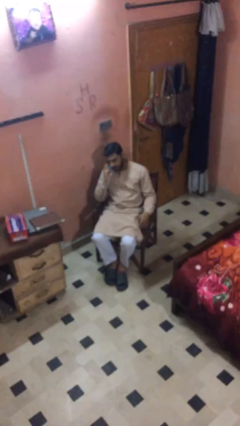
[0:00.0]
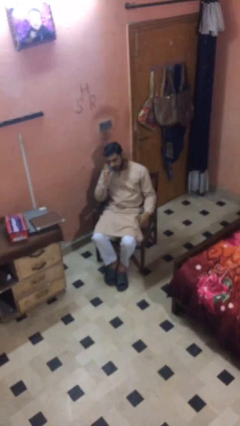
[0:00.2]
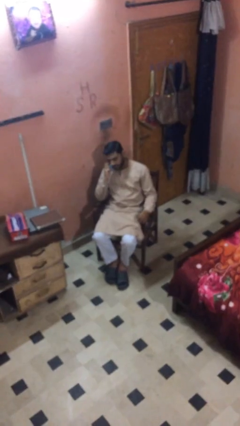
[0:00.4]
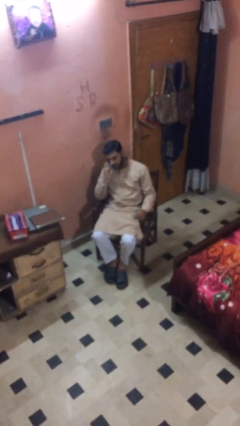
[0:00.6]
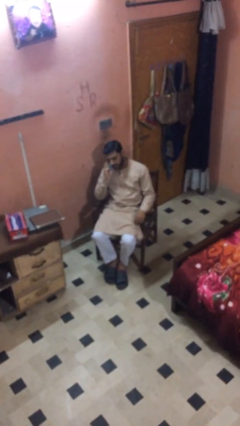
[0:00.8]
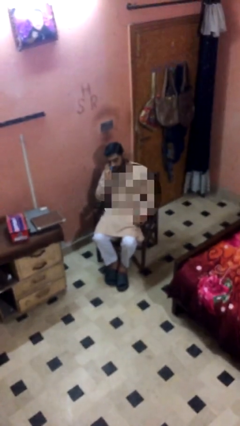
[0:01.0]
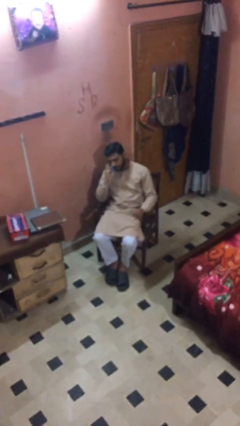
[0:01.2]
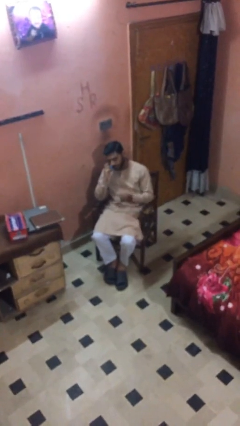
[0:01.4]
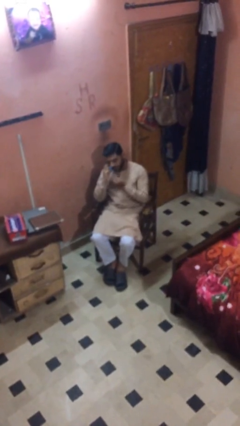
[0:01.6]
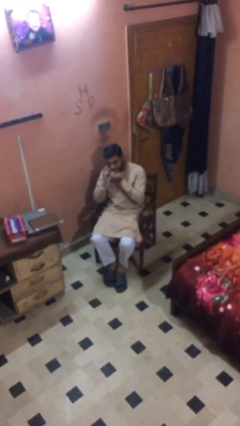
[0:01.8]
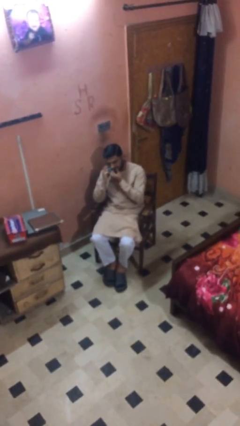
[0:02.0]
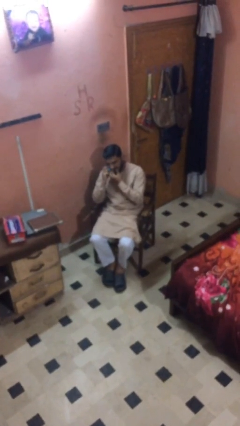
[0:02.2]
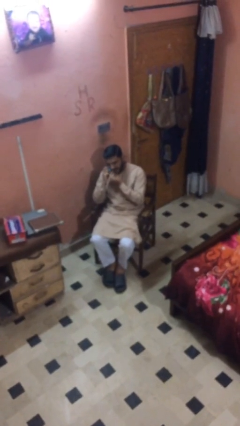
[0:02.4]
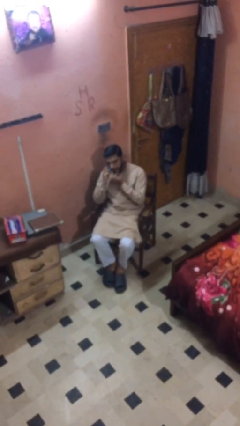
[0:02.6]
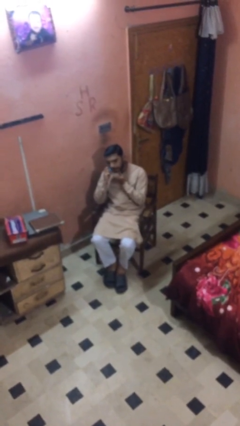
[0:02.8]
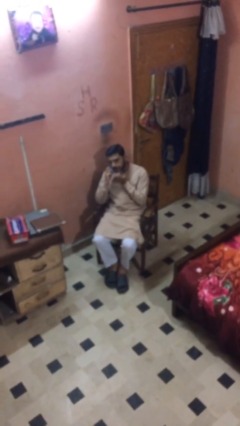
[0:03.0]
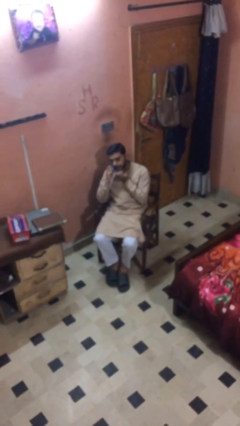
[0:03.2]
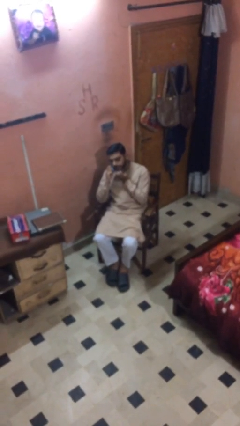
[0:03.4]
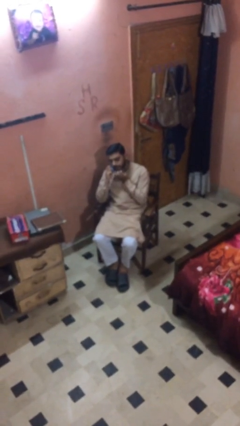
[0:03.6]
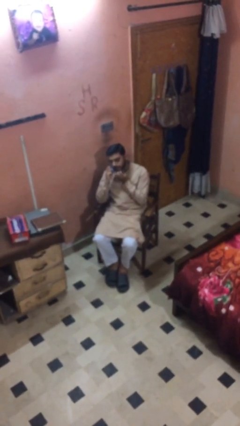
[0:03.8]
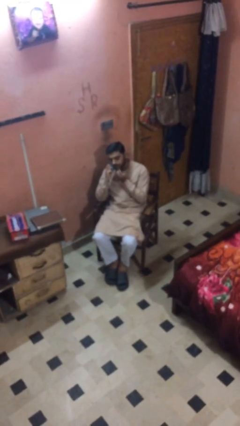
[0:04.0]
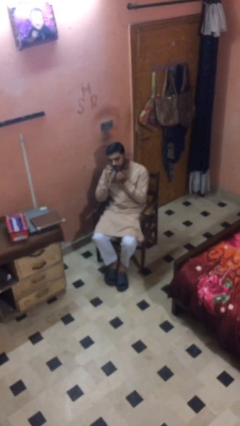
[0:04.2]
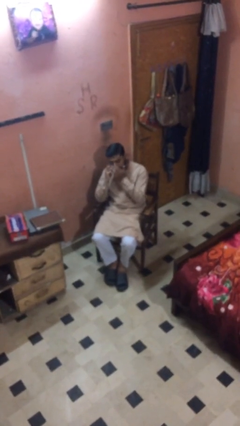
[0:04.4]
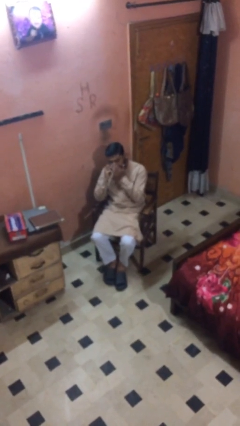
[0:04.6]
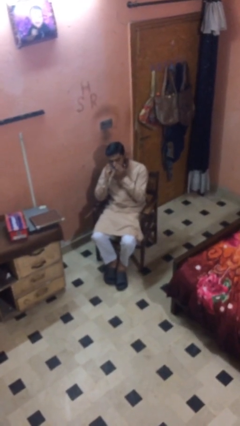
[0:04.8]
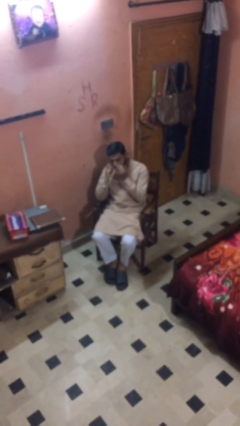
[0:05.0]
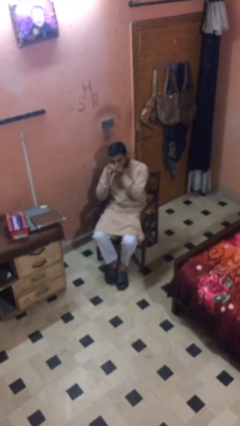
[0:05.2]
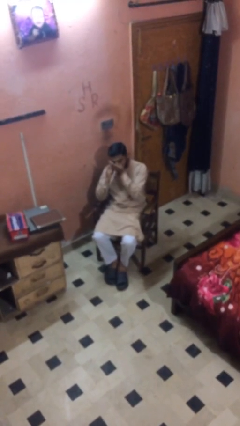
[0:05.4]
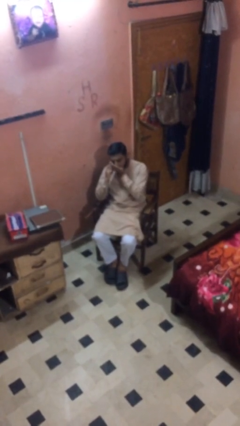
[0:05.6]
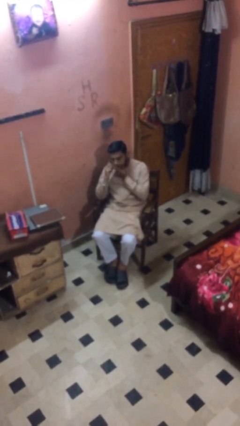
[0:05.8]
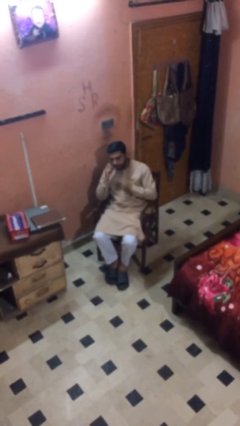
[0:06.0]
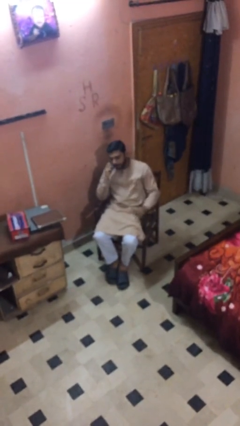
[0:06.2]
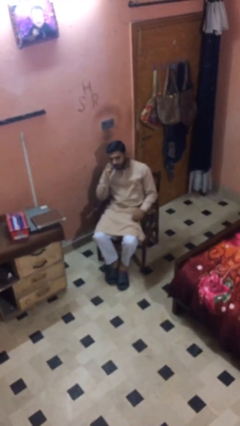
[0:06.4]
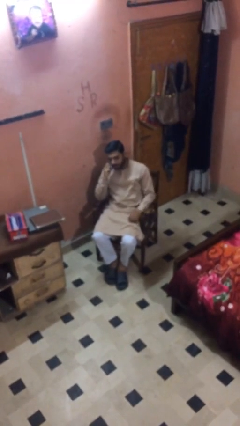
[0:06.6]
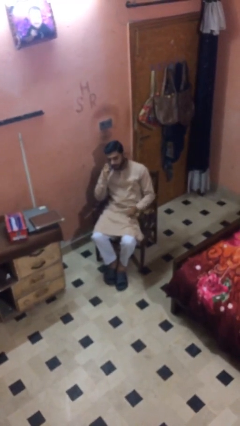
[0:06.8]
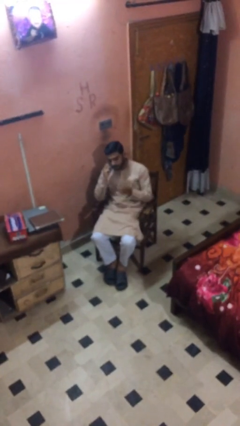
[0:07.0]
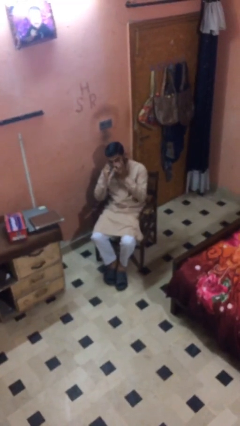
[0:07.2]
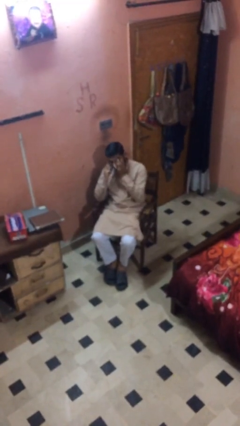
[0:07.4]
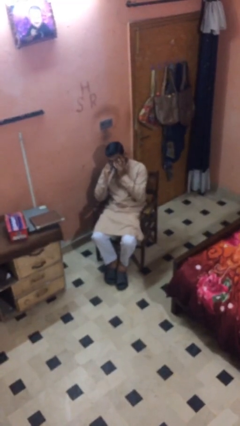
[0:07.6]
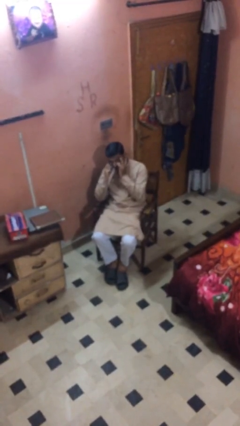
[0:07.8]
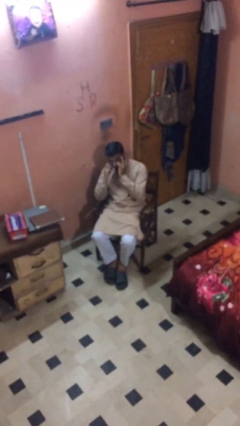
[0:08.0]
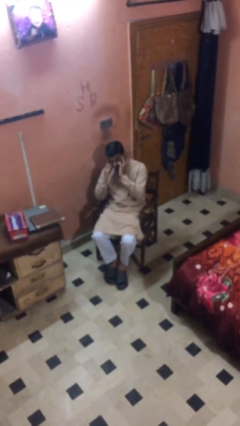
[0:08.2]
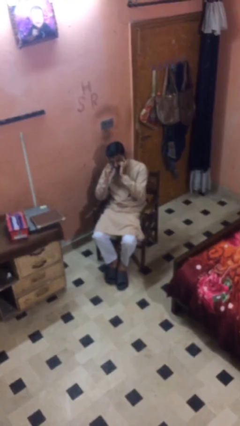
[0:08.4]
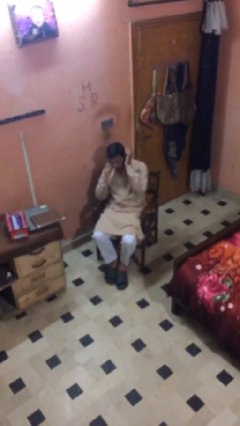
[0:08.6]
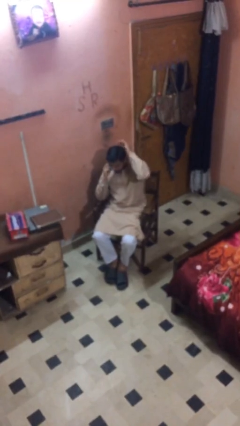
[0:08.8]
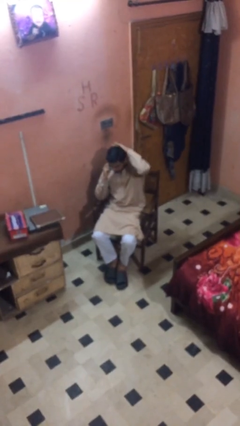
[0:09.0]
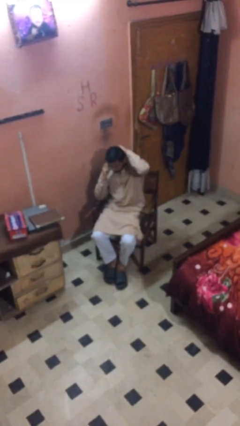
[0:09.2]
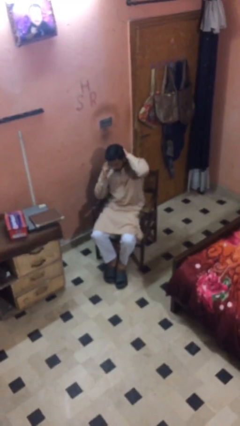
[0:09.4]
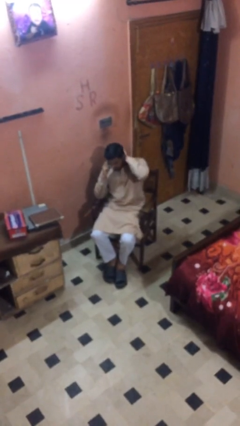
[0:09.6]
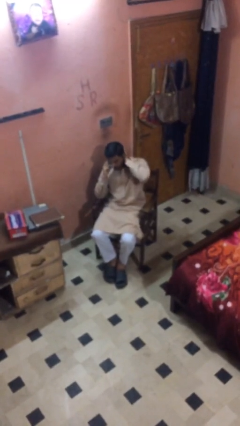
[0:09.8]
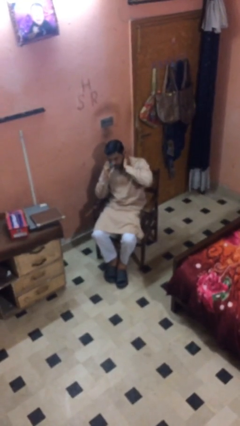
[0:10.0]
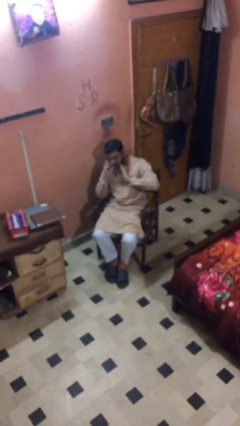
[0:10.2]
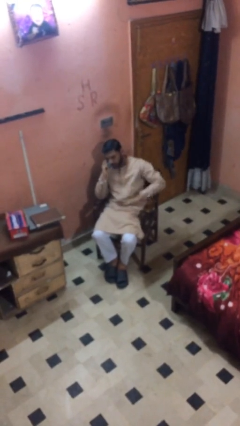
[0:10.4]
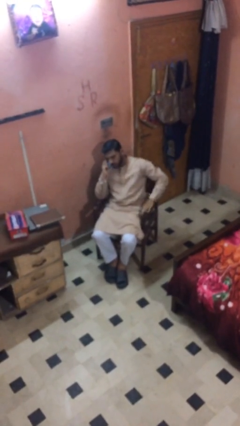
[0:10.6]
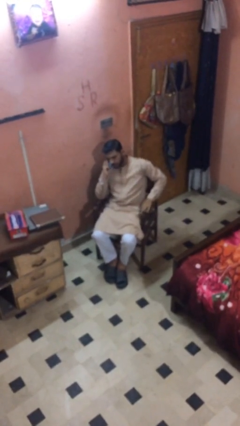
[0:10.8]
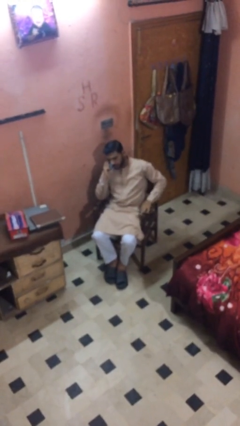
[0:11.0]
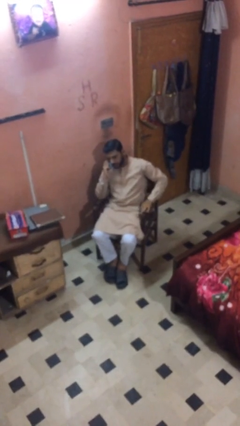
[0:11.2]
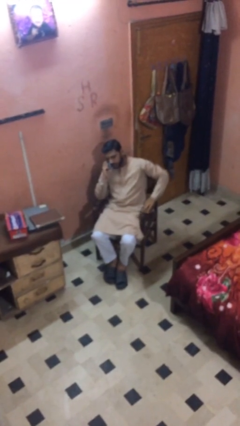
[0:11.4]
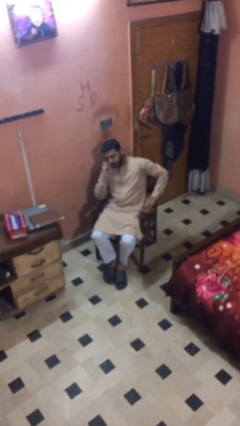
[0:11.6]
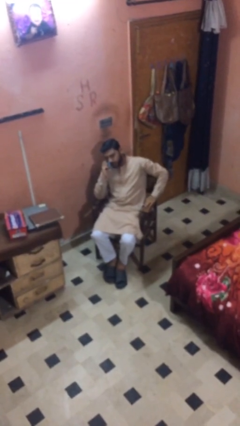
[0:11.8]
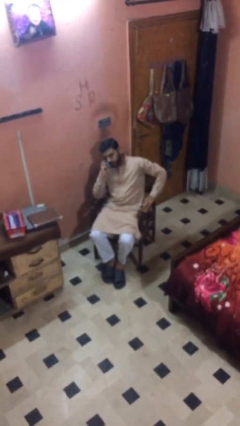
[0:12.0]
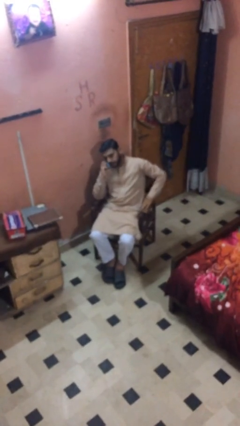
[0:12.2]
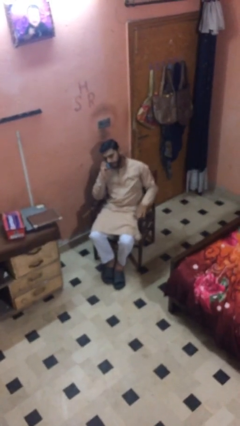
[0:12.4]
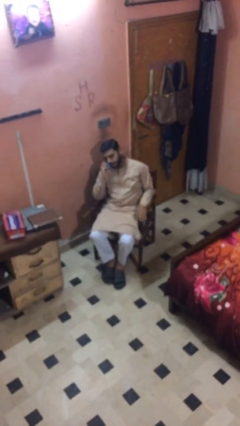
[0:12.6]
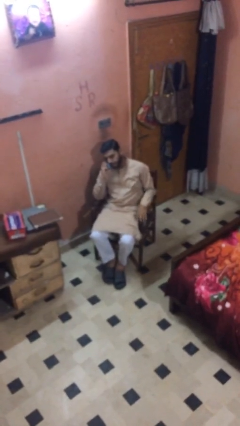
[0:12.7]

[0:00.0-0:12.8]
person talks on phone

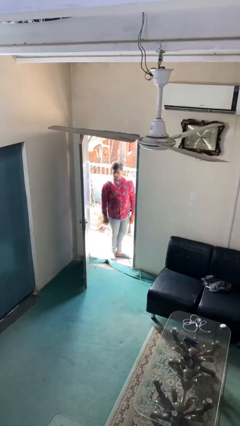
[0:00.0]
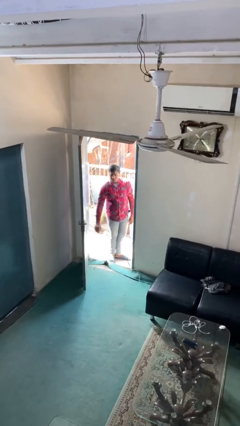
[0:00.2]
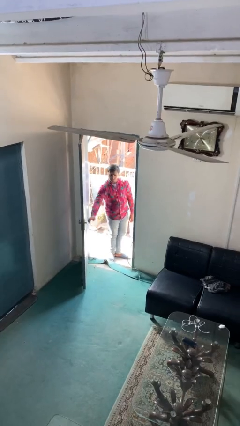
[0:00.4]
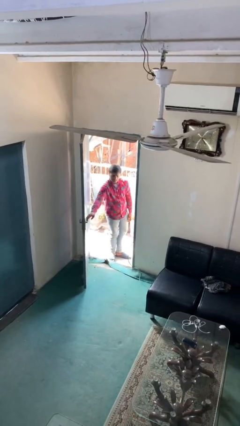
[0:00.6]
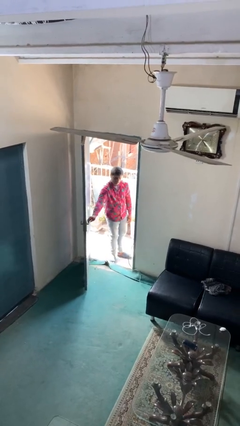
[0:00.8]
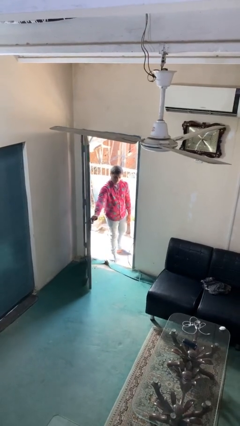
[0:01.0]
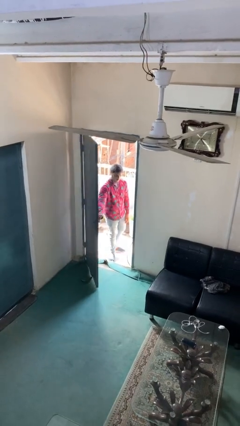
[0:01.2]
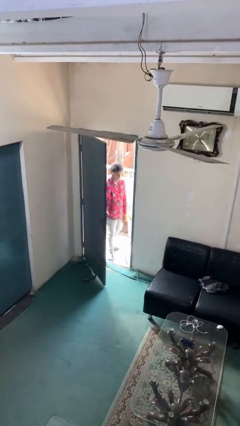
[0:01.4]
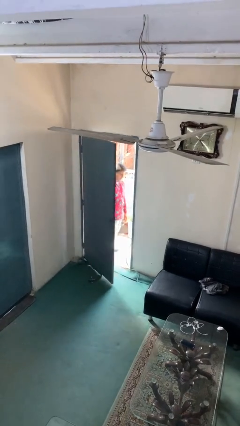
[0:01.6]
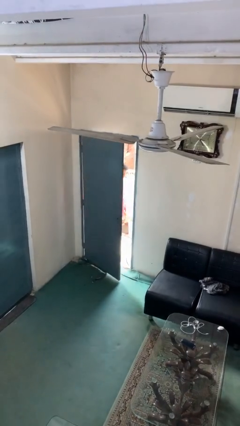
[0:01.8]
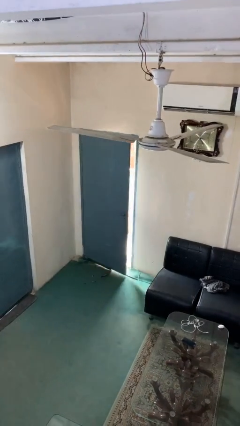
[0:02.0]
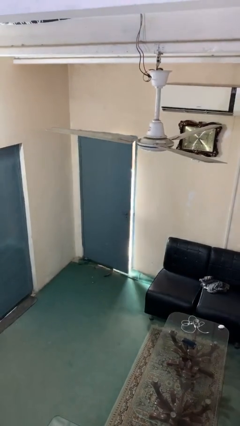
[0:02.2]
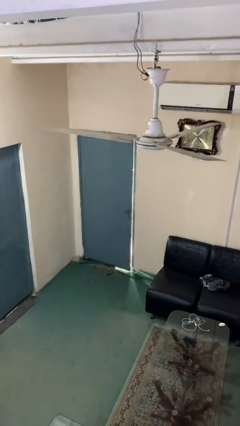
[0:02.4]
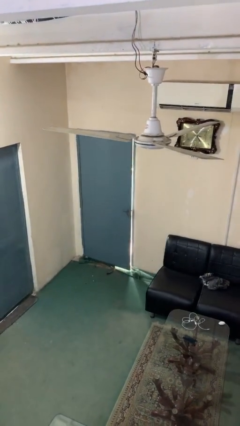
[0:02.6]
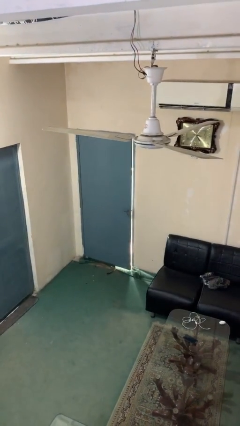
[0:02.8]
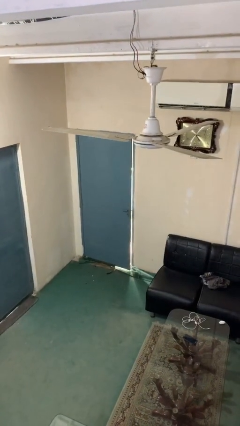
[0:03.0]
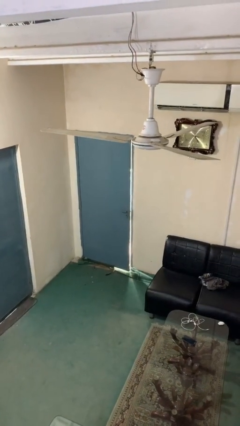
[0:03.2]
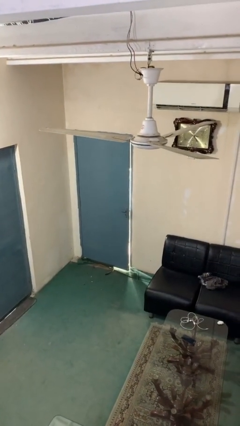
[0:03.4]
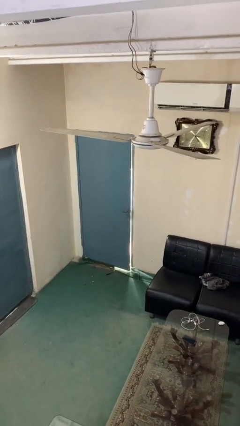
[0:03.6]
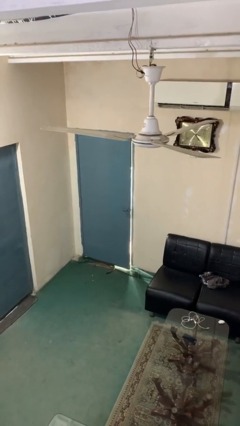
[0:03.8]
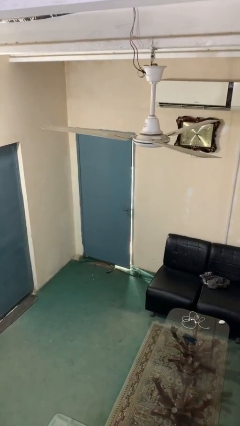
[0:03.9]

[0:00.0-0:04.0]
person closes facility door

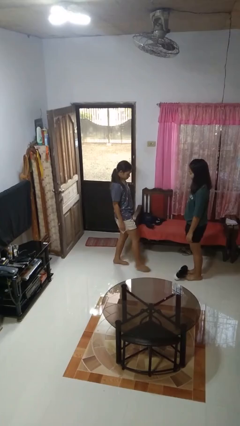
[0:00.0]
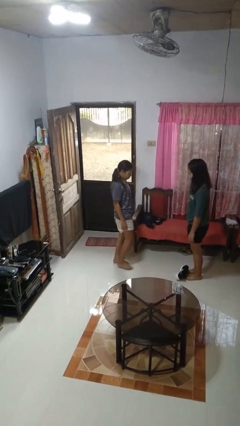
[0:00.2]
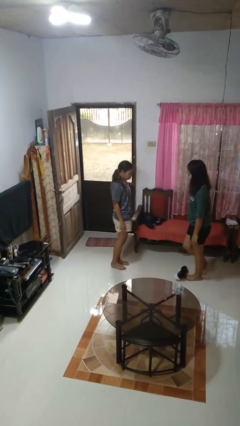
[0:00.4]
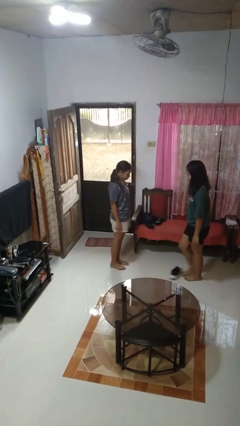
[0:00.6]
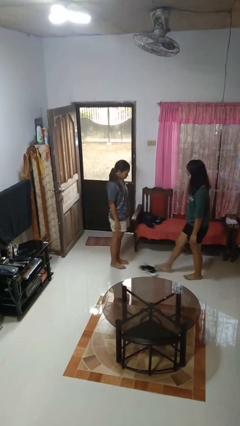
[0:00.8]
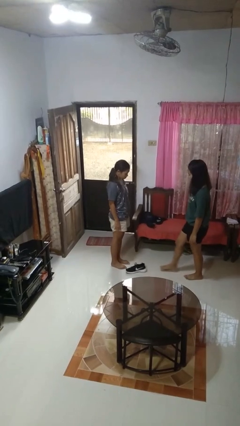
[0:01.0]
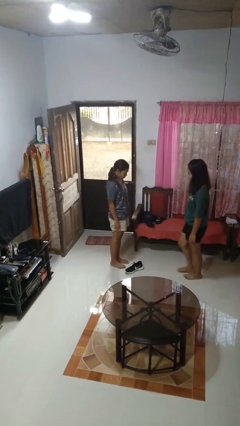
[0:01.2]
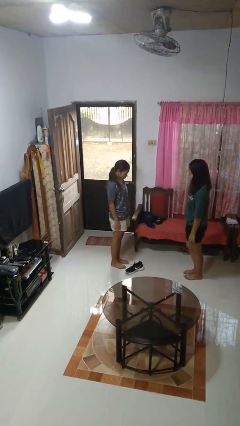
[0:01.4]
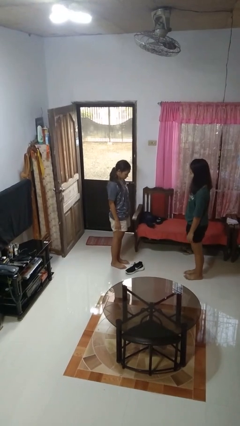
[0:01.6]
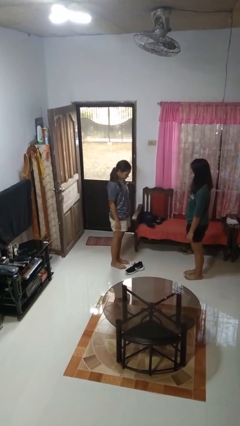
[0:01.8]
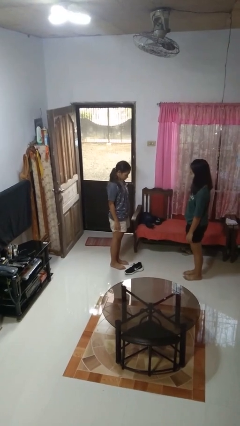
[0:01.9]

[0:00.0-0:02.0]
person kicks object to person
